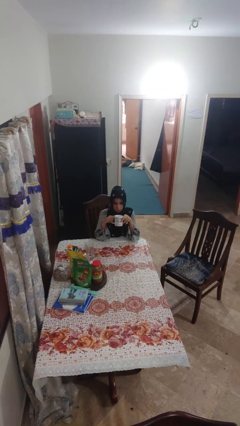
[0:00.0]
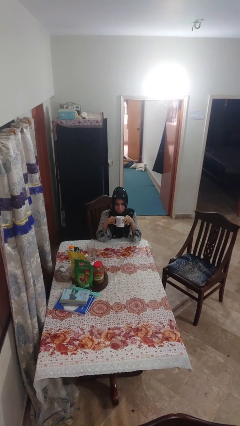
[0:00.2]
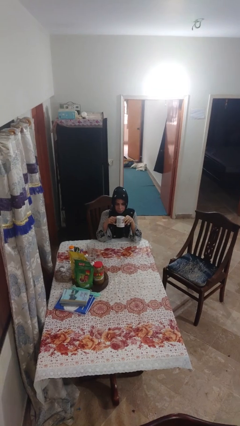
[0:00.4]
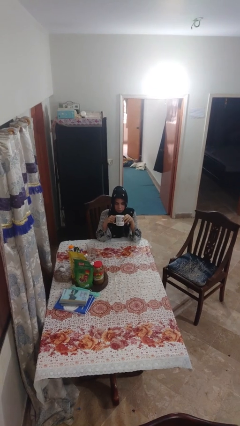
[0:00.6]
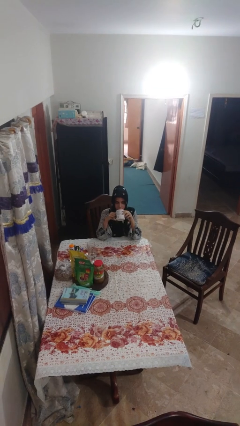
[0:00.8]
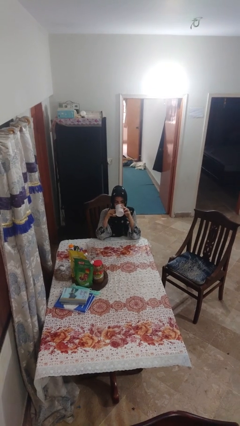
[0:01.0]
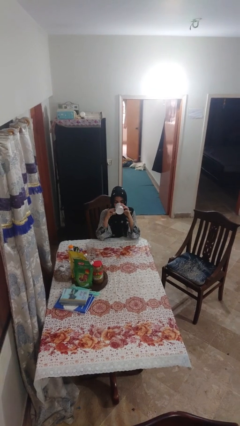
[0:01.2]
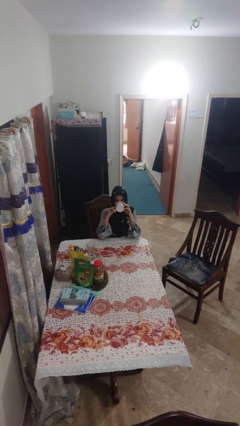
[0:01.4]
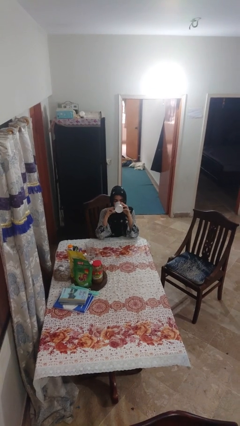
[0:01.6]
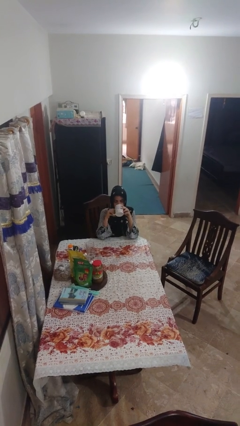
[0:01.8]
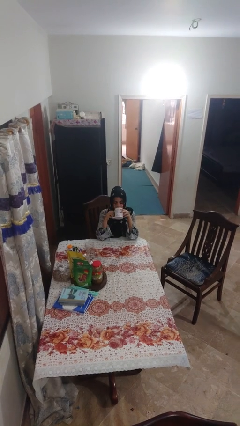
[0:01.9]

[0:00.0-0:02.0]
person drinks from mug

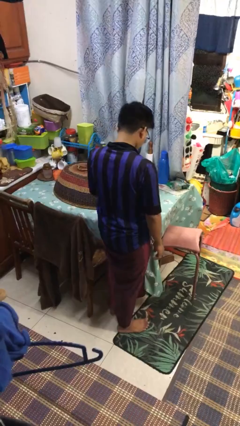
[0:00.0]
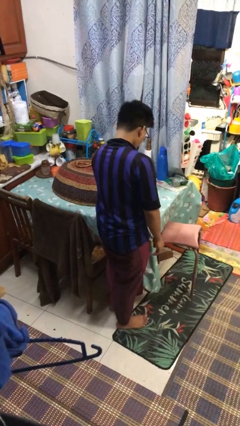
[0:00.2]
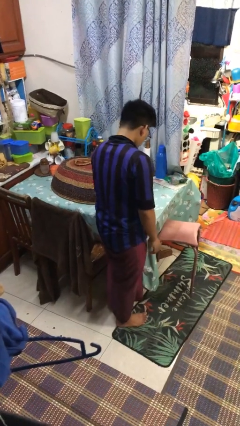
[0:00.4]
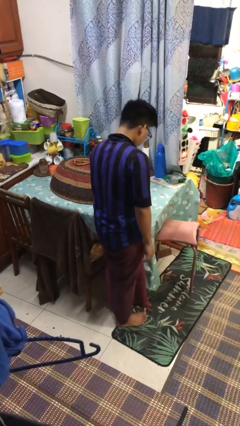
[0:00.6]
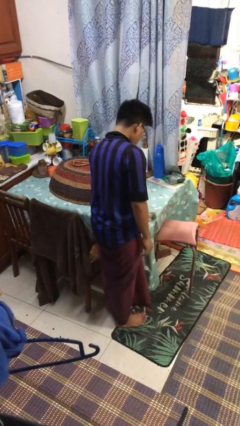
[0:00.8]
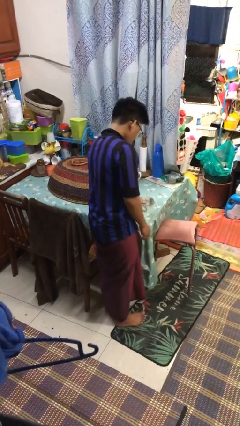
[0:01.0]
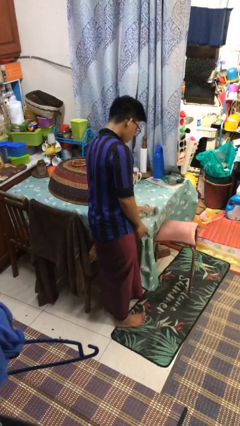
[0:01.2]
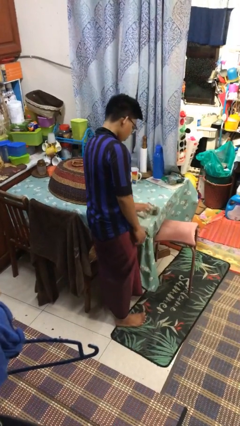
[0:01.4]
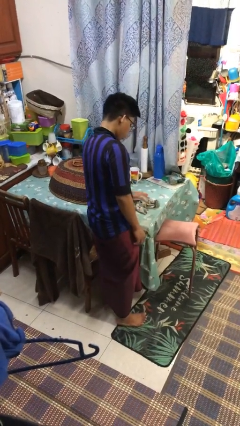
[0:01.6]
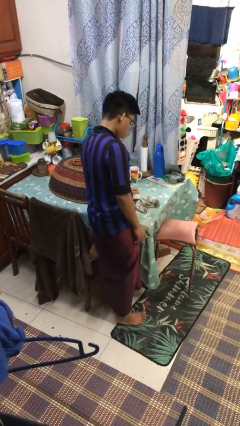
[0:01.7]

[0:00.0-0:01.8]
person cleans table with rag

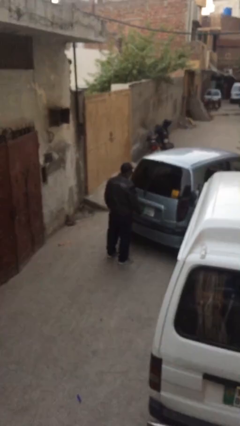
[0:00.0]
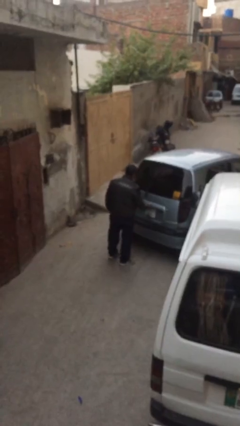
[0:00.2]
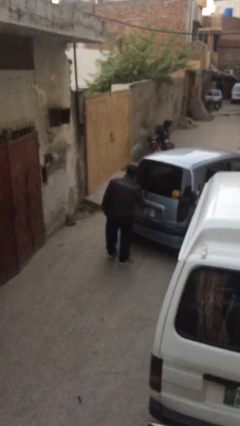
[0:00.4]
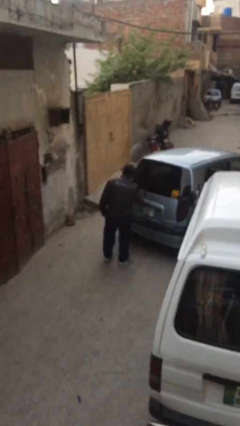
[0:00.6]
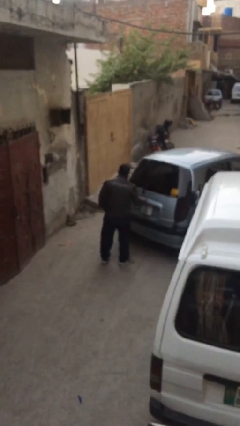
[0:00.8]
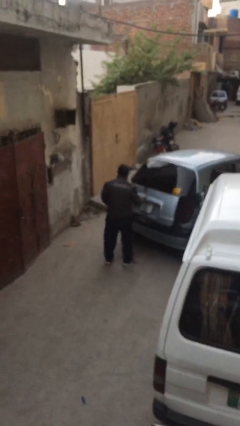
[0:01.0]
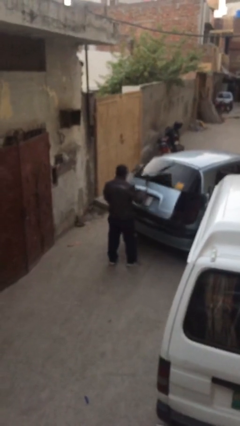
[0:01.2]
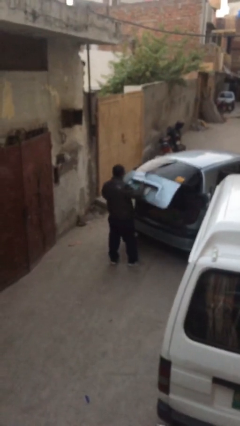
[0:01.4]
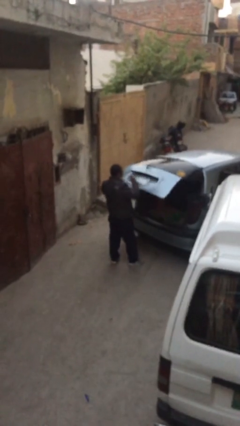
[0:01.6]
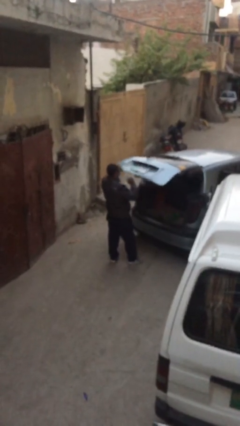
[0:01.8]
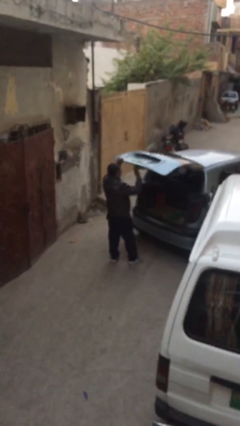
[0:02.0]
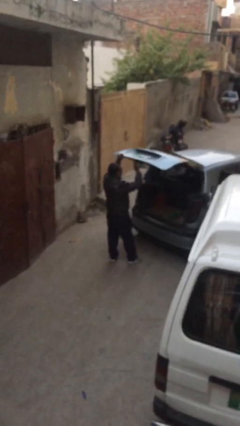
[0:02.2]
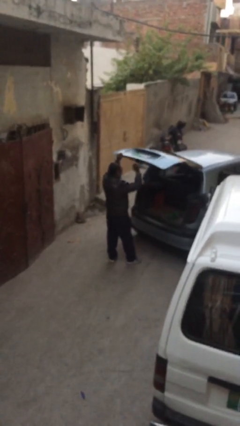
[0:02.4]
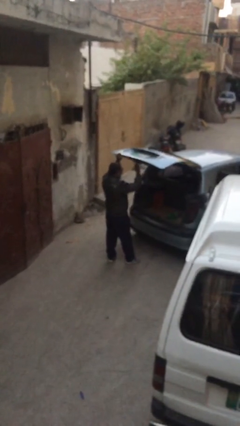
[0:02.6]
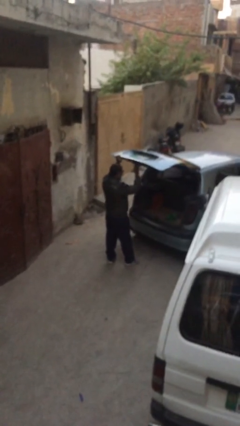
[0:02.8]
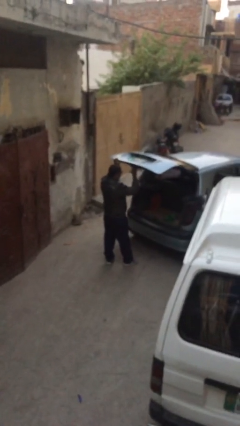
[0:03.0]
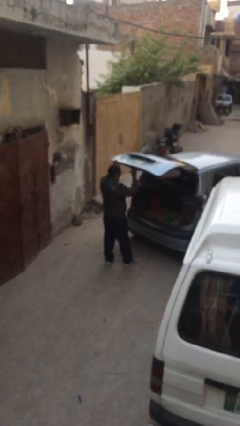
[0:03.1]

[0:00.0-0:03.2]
person opens car trunk

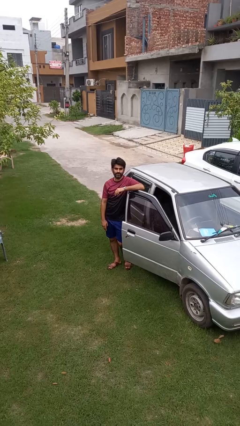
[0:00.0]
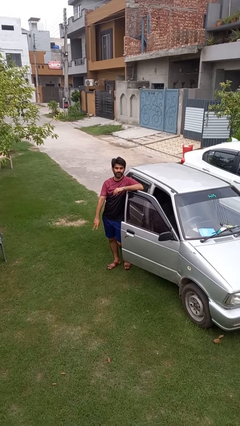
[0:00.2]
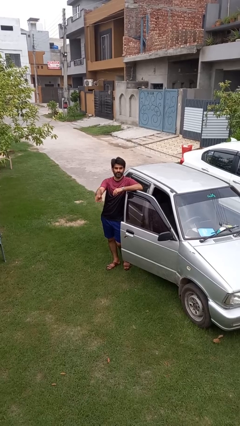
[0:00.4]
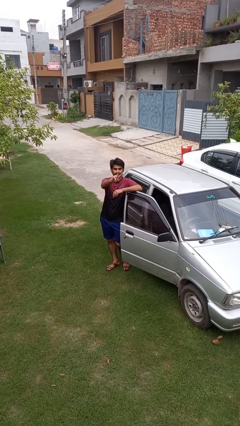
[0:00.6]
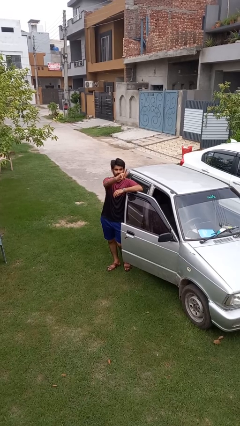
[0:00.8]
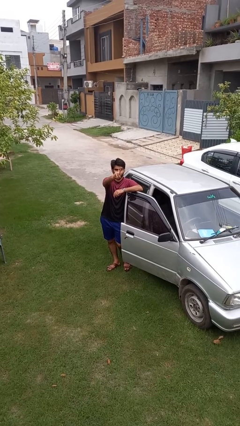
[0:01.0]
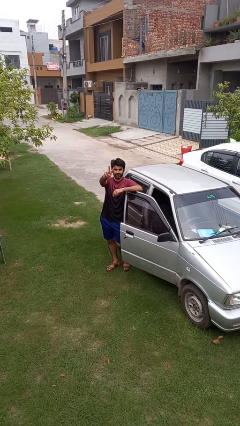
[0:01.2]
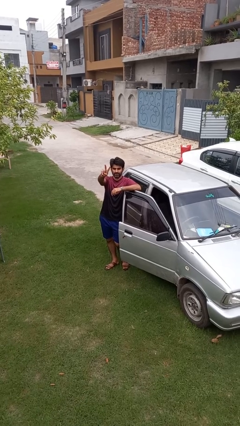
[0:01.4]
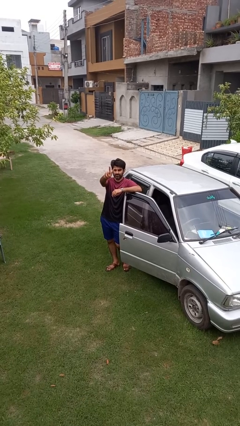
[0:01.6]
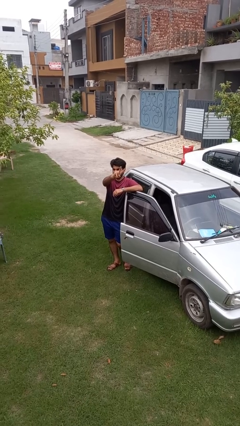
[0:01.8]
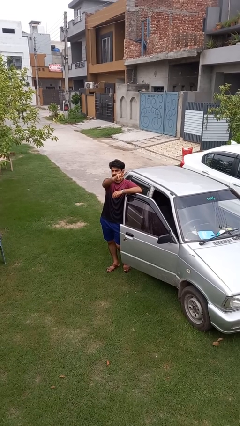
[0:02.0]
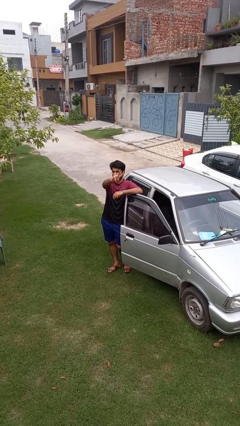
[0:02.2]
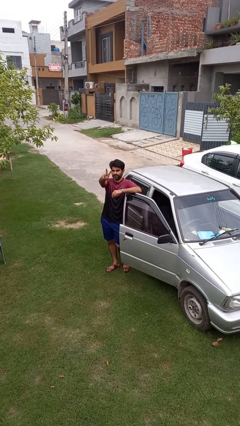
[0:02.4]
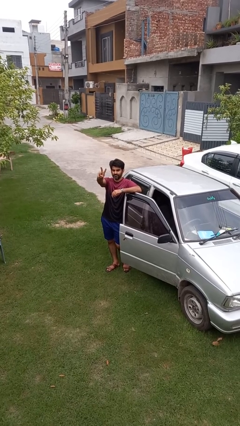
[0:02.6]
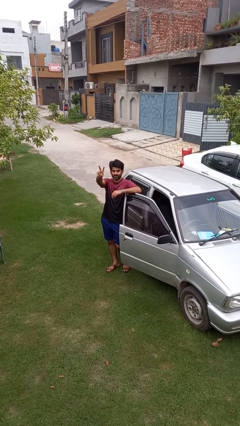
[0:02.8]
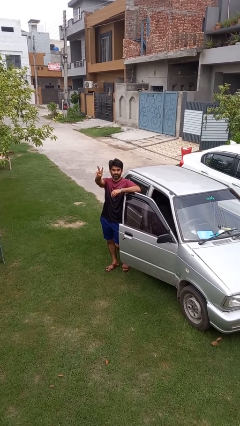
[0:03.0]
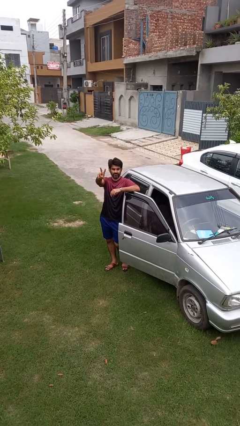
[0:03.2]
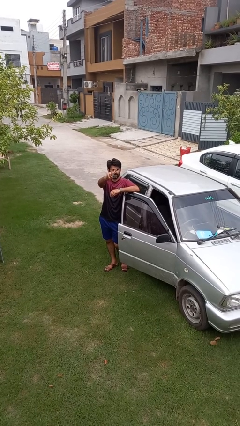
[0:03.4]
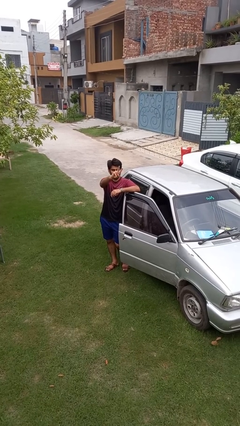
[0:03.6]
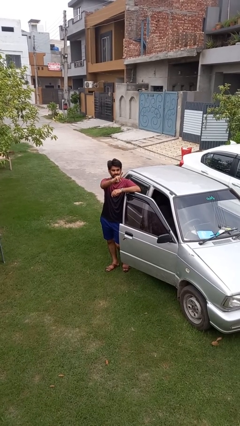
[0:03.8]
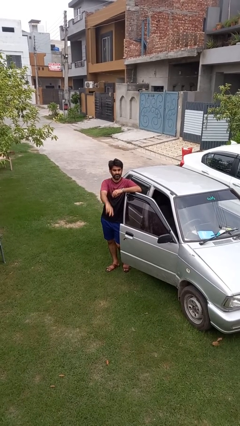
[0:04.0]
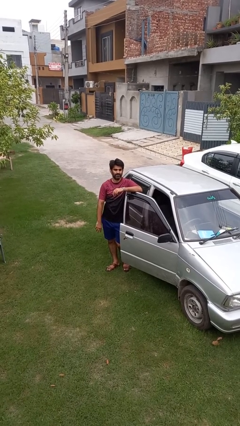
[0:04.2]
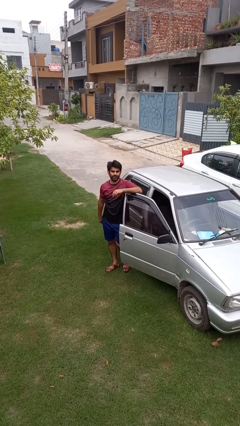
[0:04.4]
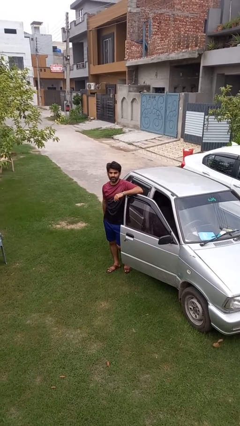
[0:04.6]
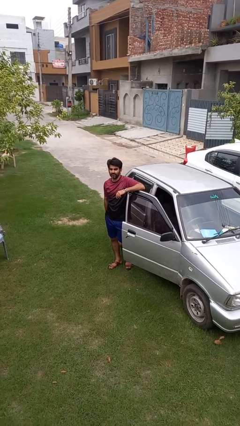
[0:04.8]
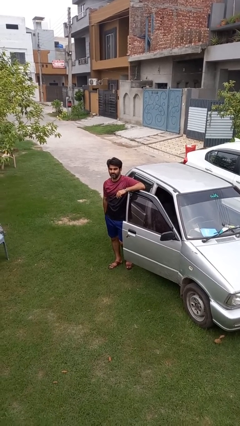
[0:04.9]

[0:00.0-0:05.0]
person gestures peace

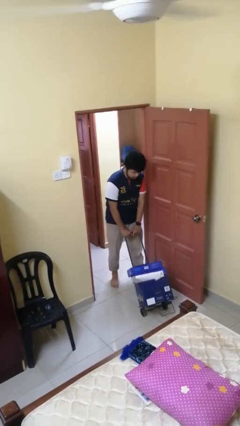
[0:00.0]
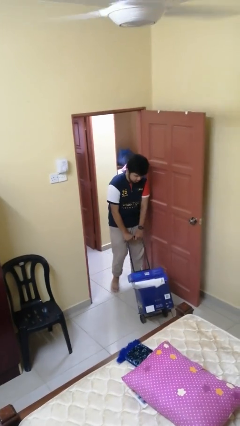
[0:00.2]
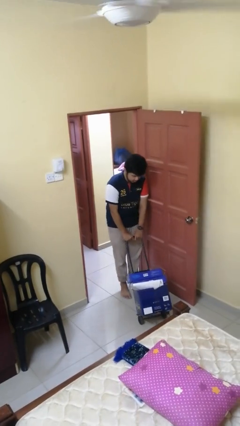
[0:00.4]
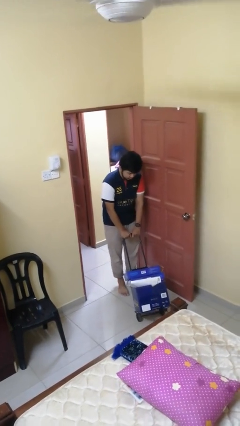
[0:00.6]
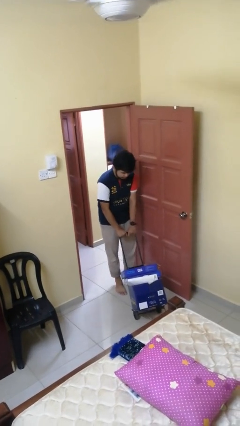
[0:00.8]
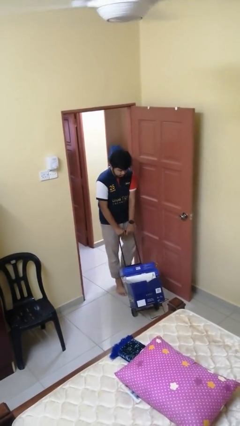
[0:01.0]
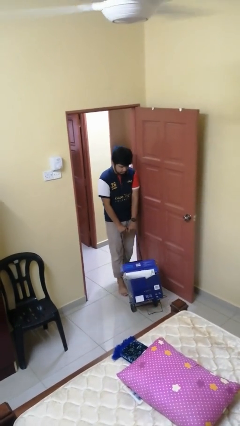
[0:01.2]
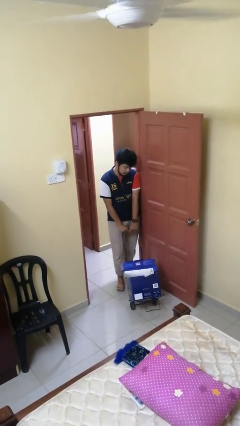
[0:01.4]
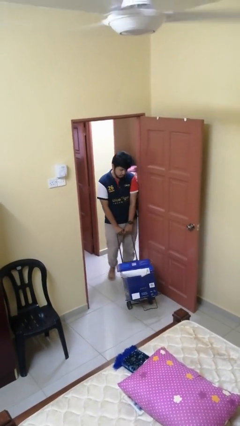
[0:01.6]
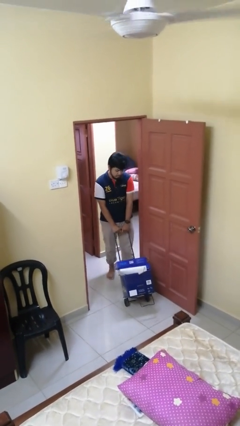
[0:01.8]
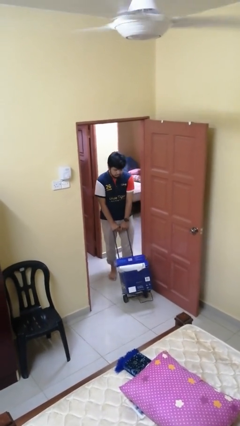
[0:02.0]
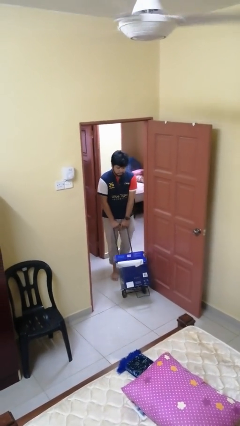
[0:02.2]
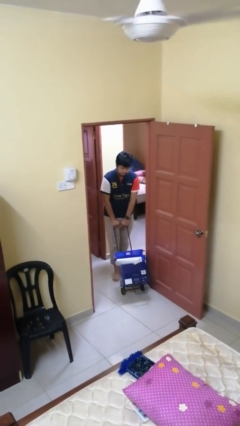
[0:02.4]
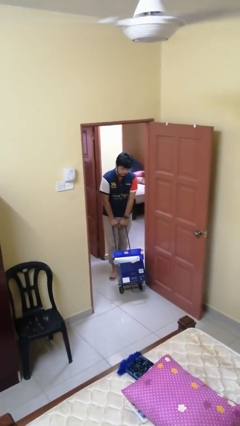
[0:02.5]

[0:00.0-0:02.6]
person pulls wheeled cart

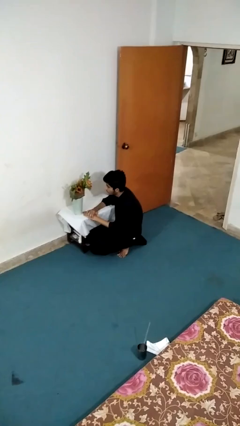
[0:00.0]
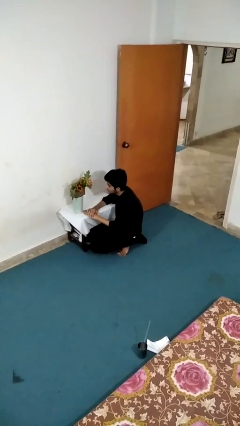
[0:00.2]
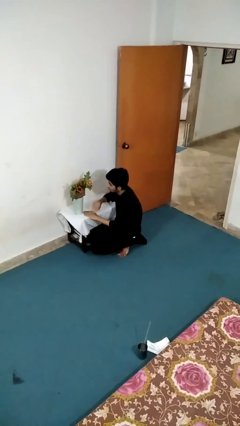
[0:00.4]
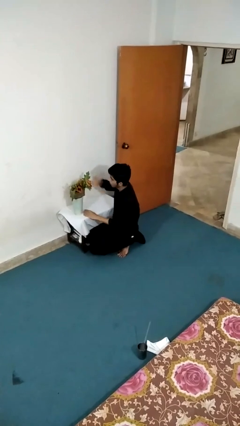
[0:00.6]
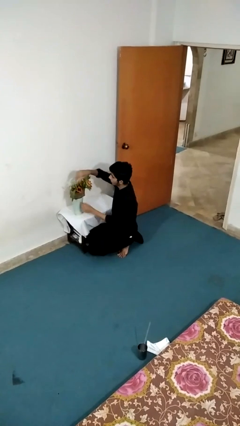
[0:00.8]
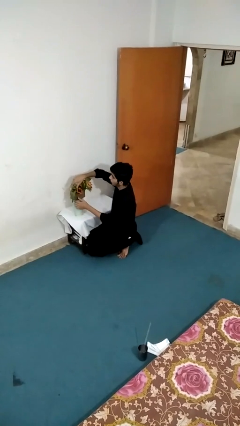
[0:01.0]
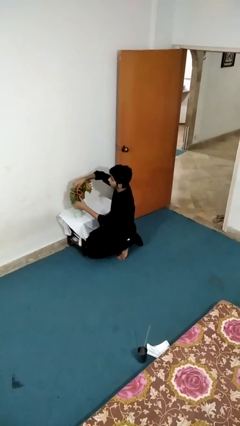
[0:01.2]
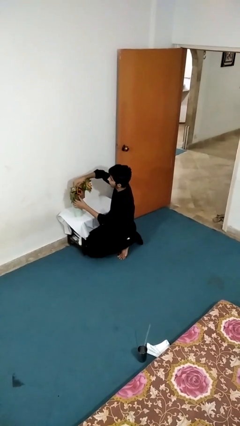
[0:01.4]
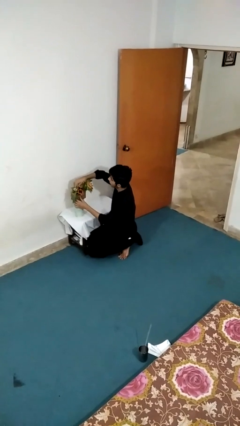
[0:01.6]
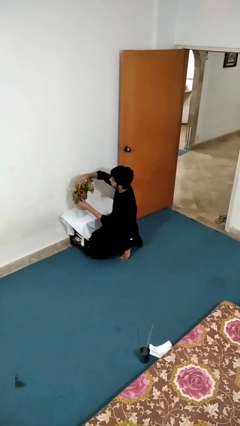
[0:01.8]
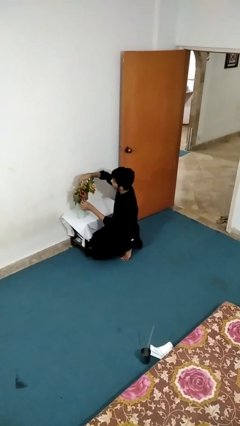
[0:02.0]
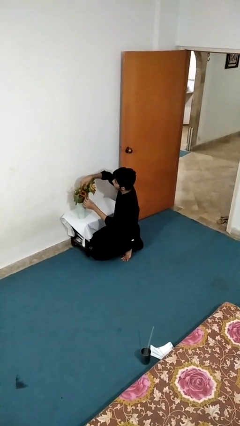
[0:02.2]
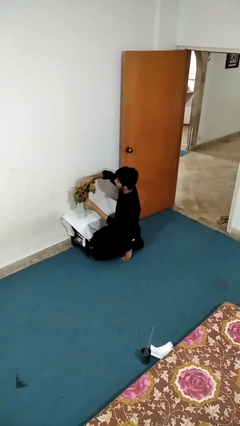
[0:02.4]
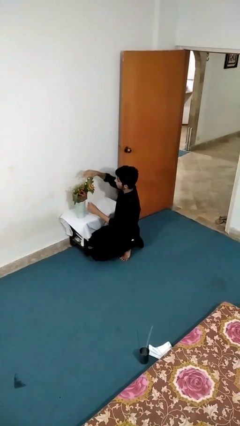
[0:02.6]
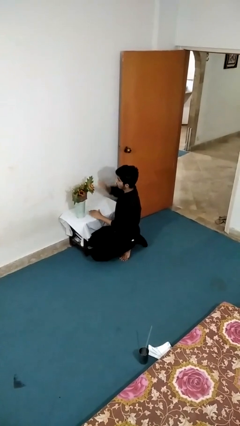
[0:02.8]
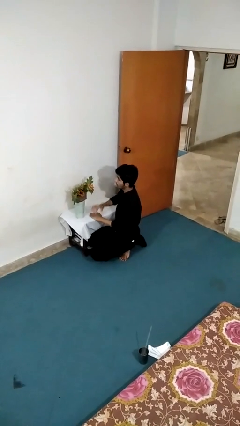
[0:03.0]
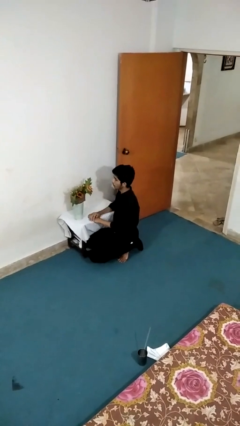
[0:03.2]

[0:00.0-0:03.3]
person arranges flowers in vase
